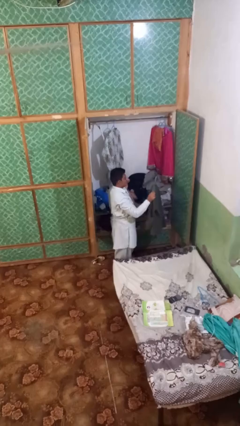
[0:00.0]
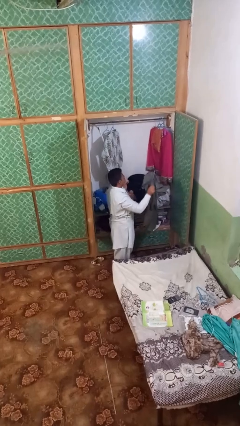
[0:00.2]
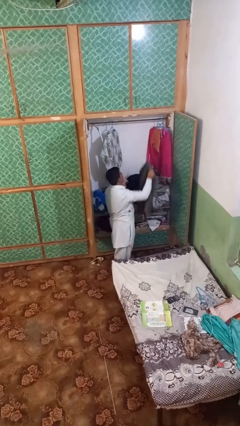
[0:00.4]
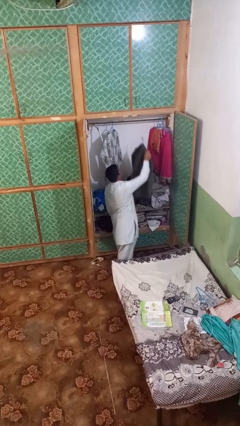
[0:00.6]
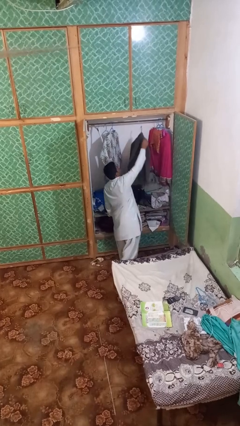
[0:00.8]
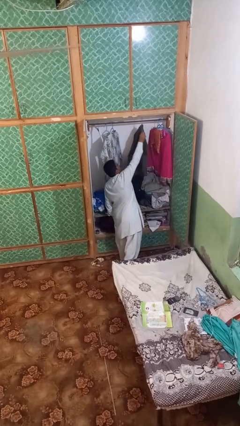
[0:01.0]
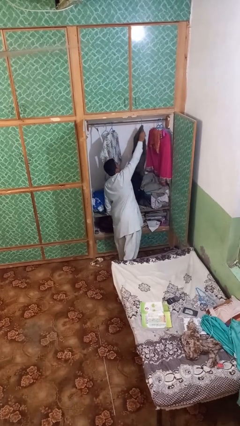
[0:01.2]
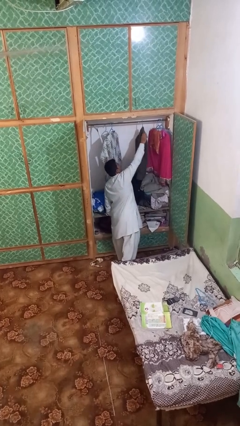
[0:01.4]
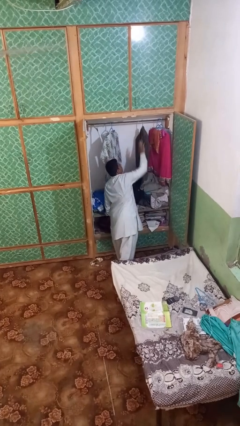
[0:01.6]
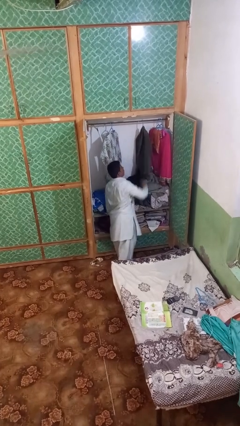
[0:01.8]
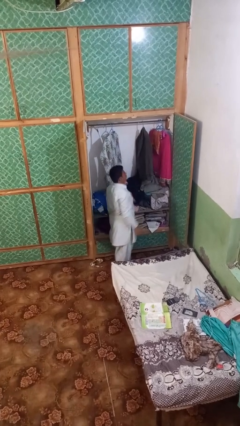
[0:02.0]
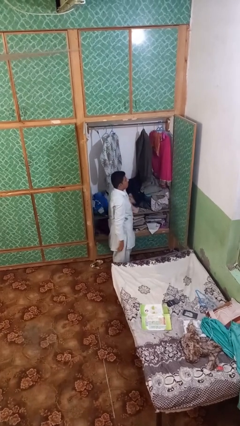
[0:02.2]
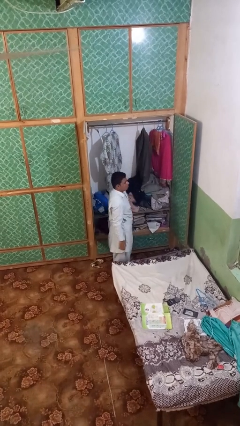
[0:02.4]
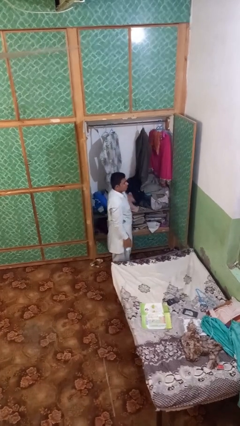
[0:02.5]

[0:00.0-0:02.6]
person puts clothes into closet

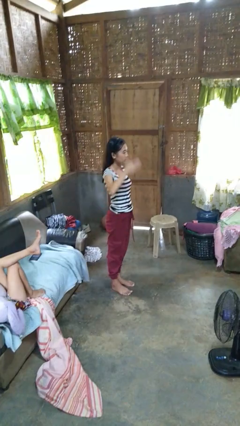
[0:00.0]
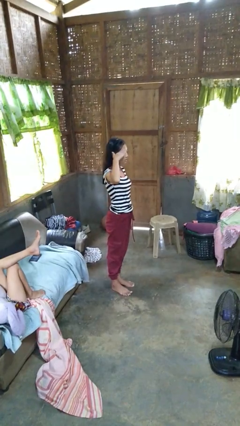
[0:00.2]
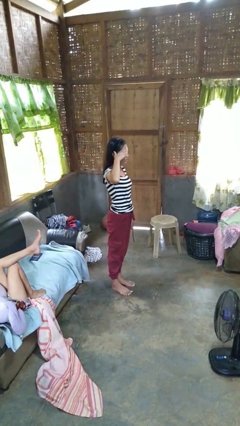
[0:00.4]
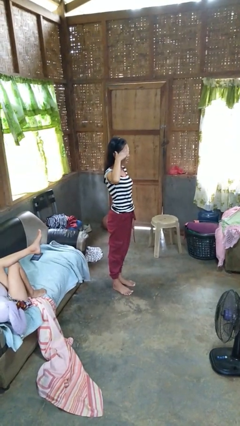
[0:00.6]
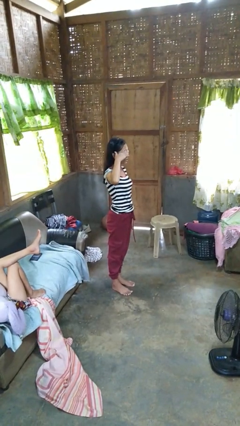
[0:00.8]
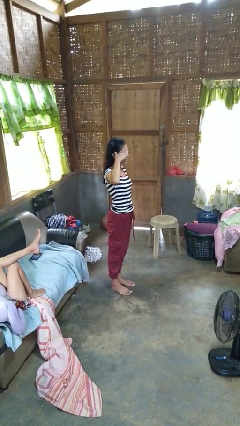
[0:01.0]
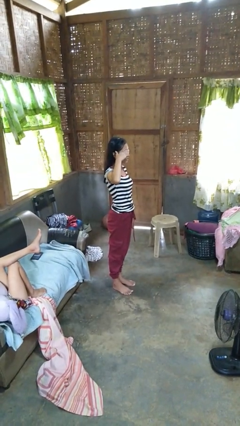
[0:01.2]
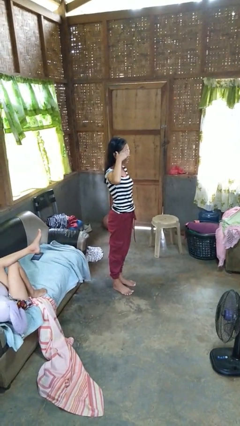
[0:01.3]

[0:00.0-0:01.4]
person salutes

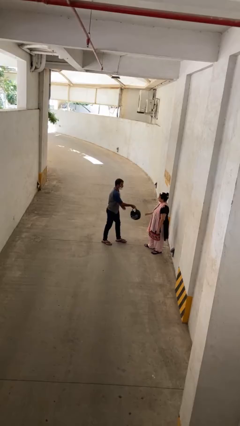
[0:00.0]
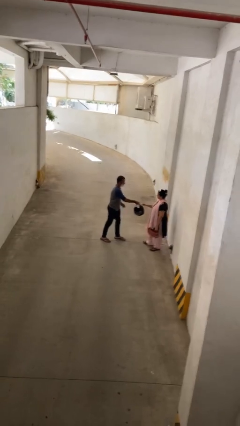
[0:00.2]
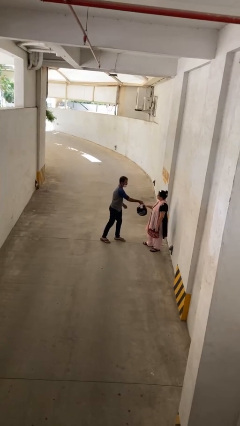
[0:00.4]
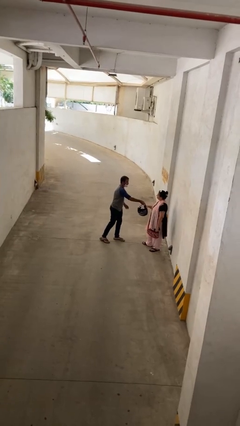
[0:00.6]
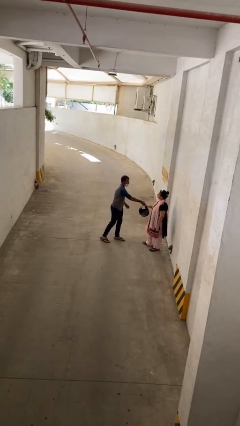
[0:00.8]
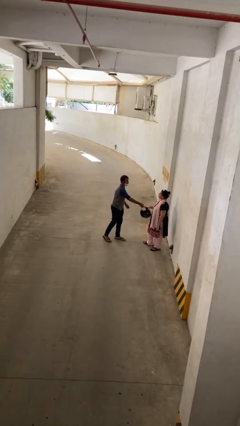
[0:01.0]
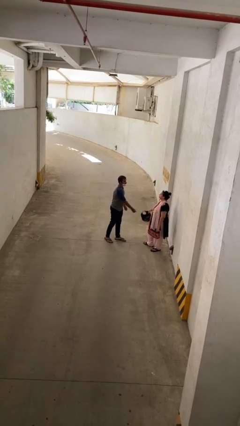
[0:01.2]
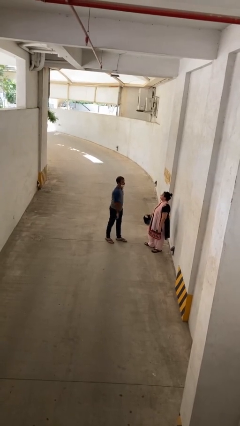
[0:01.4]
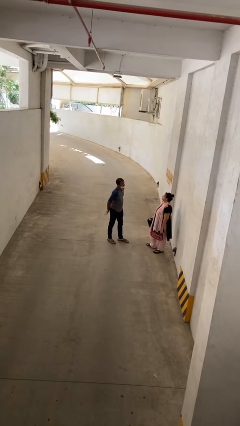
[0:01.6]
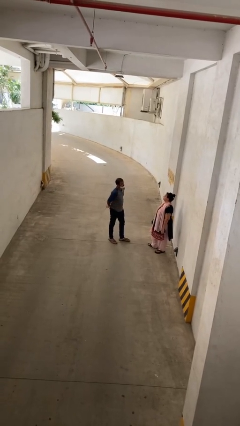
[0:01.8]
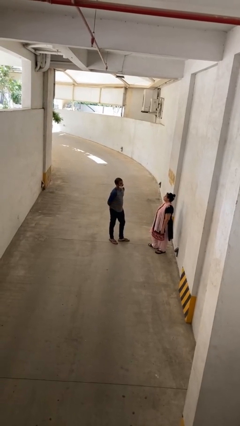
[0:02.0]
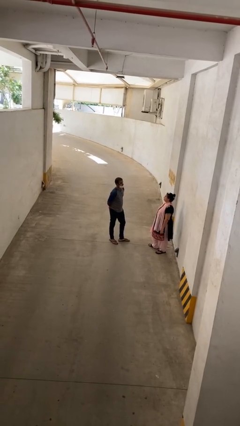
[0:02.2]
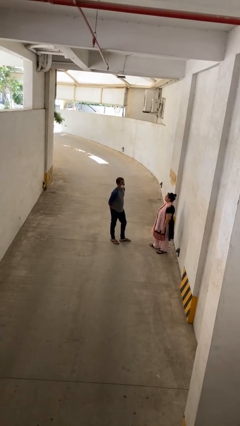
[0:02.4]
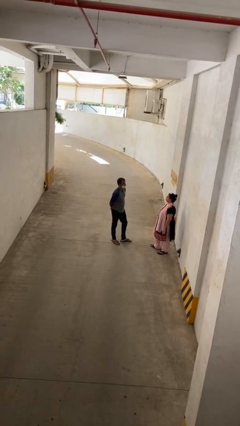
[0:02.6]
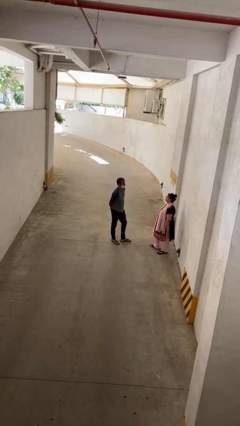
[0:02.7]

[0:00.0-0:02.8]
person transfers object to person

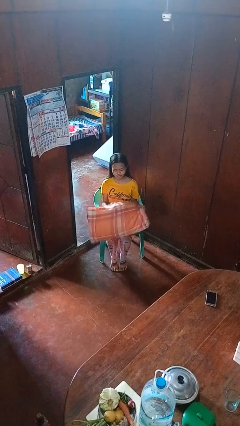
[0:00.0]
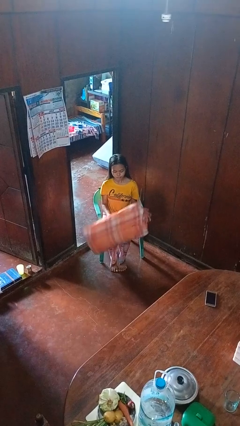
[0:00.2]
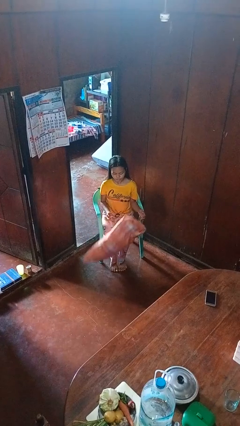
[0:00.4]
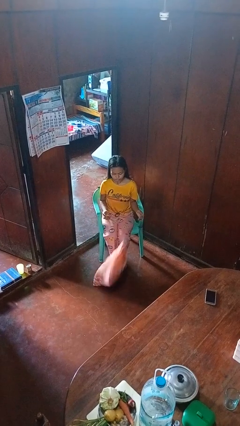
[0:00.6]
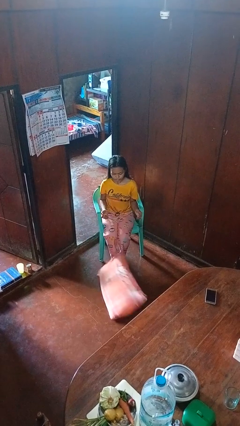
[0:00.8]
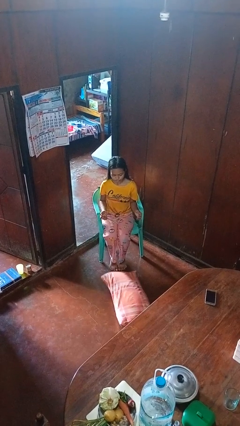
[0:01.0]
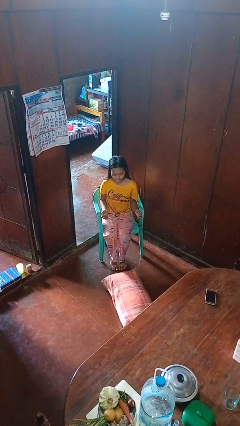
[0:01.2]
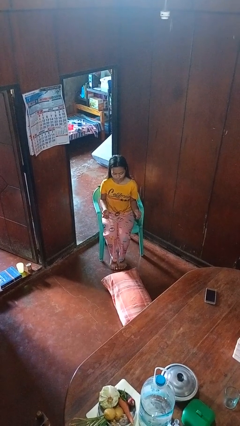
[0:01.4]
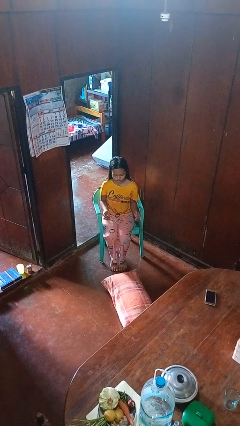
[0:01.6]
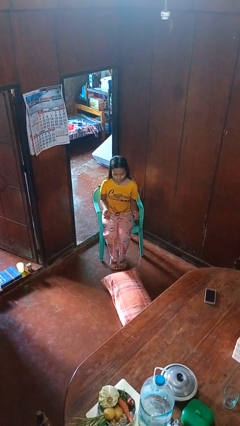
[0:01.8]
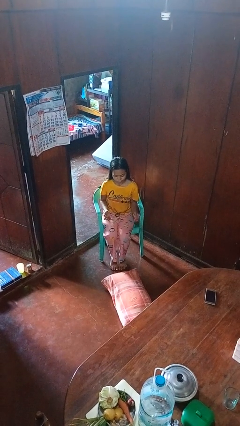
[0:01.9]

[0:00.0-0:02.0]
person drops object

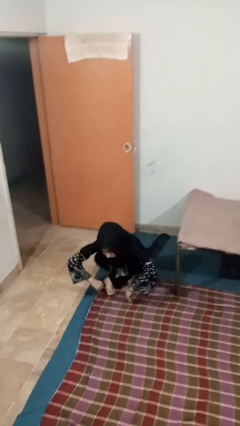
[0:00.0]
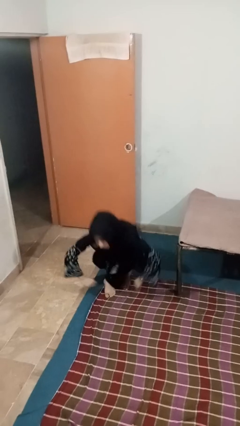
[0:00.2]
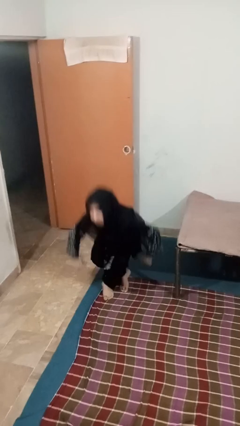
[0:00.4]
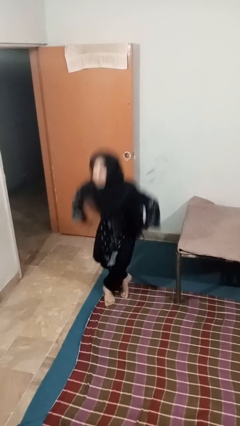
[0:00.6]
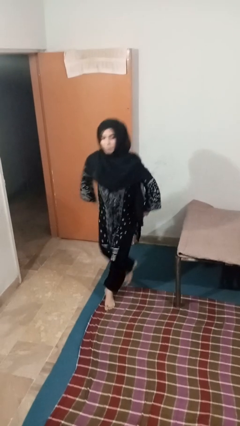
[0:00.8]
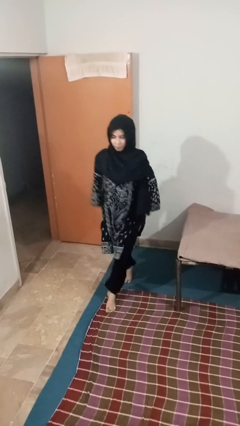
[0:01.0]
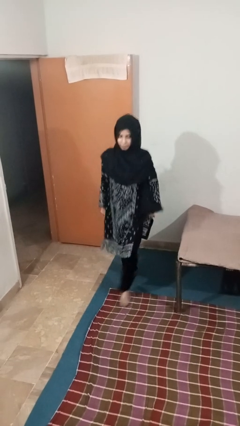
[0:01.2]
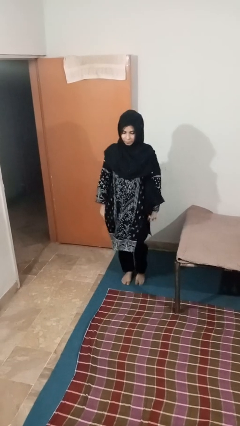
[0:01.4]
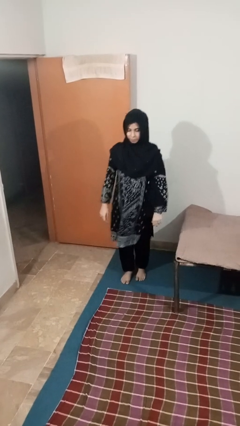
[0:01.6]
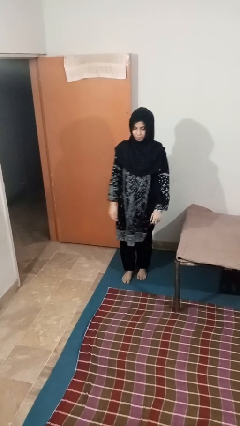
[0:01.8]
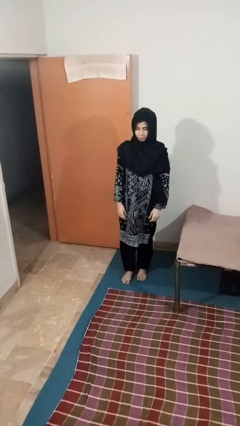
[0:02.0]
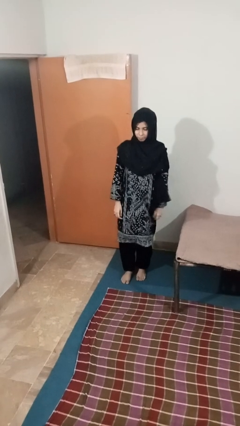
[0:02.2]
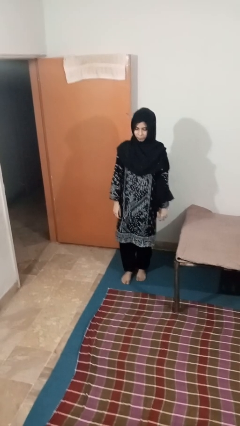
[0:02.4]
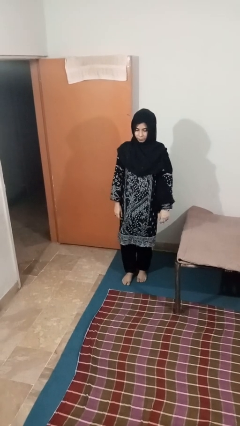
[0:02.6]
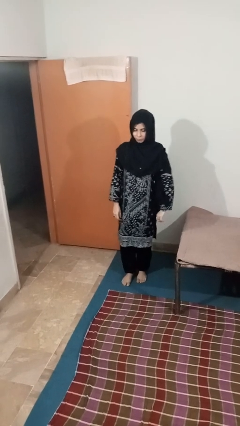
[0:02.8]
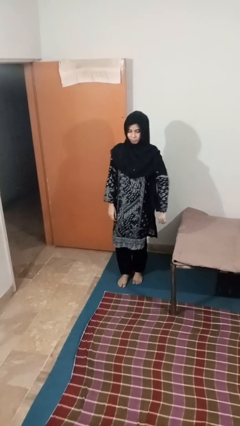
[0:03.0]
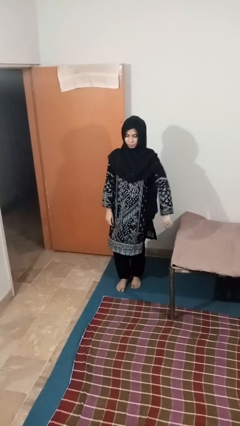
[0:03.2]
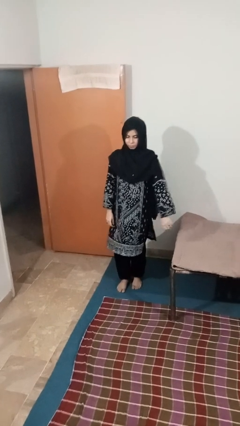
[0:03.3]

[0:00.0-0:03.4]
person stands up from floor

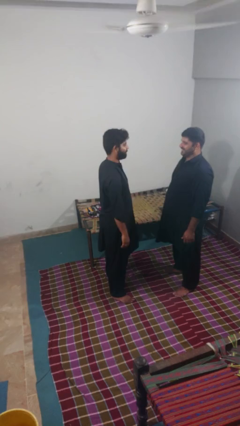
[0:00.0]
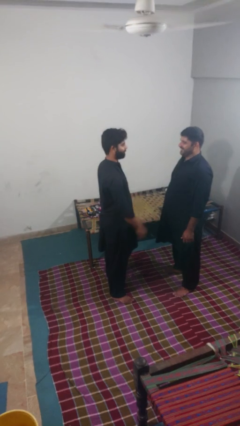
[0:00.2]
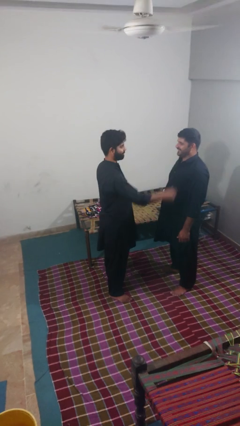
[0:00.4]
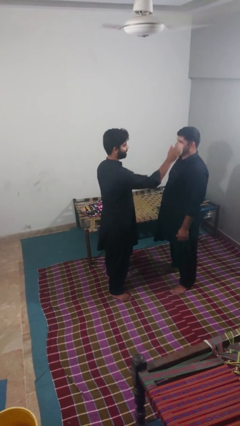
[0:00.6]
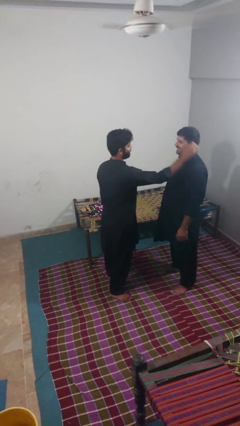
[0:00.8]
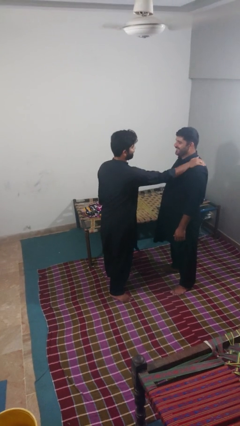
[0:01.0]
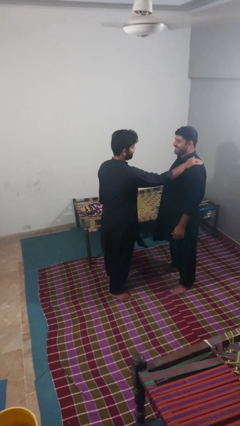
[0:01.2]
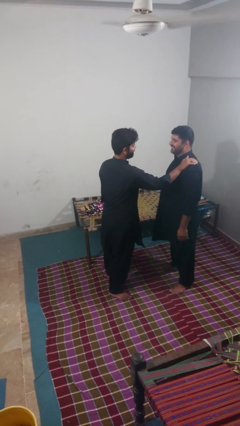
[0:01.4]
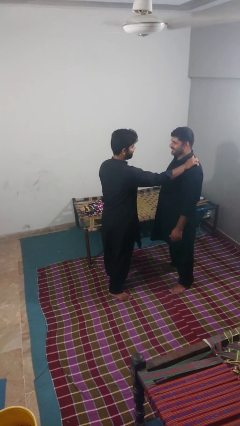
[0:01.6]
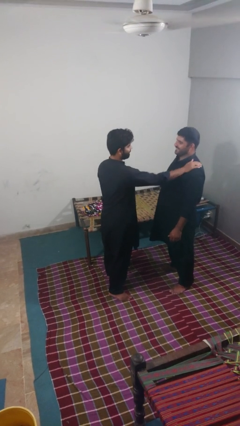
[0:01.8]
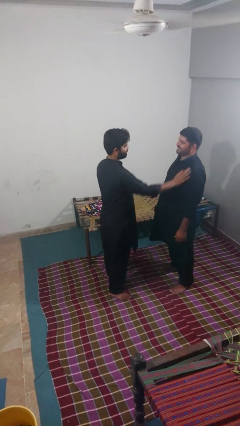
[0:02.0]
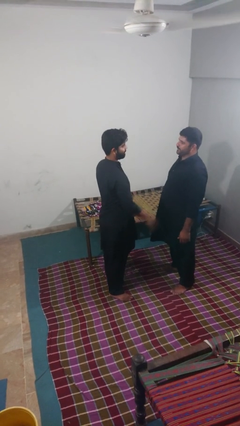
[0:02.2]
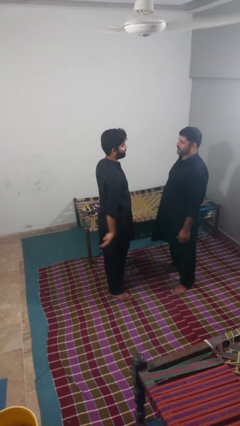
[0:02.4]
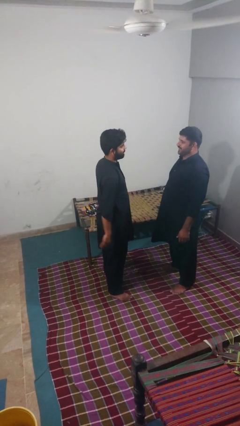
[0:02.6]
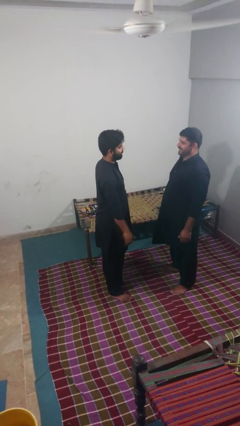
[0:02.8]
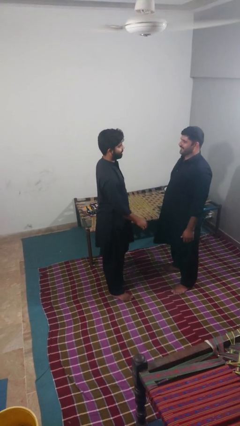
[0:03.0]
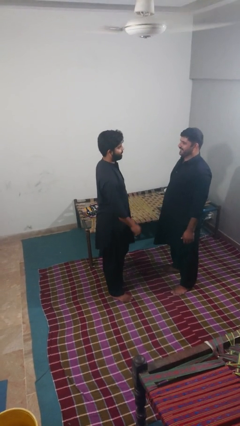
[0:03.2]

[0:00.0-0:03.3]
person pounds shoulders of person

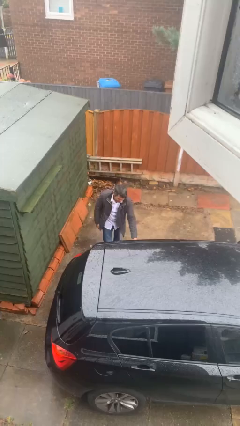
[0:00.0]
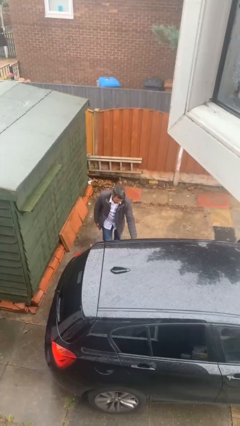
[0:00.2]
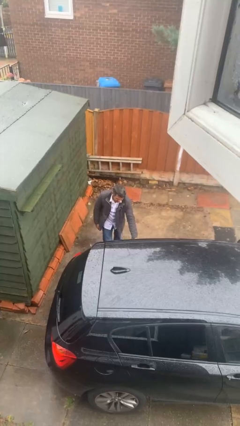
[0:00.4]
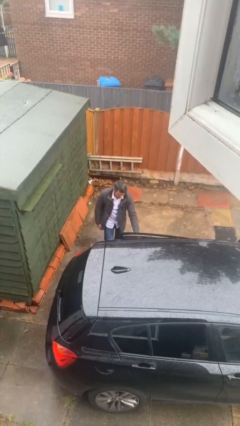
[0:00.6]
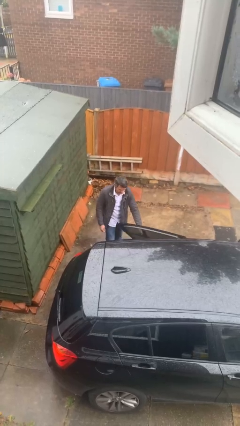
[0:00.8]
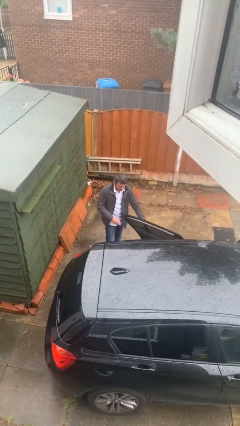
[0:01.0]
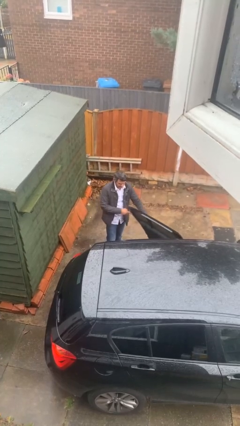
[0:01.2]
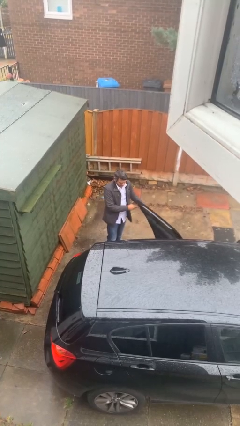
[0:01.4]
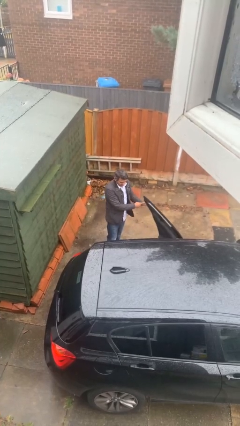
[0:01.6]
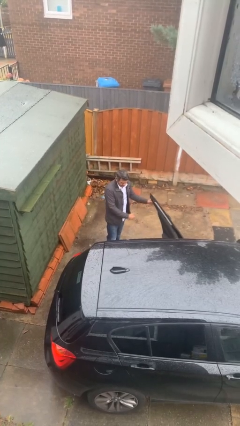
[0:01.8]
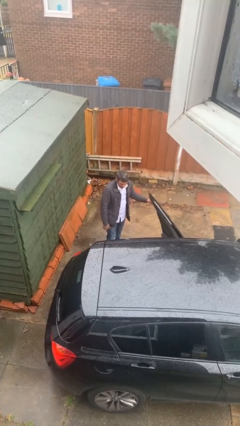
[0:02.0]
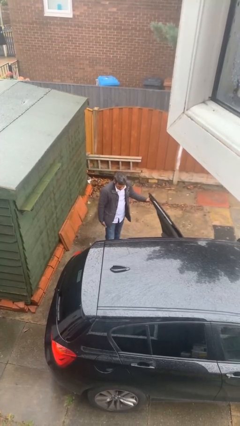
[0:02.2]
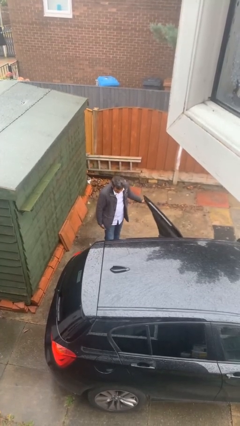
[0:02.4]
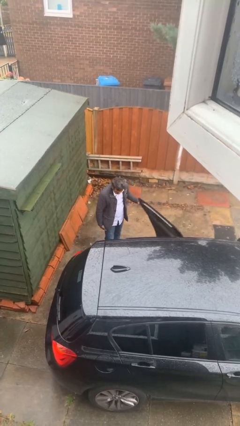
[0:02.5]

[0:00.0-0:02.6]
person opens car door
